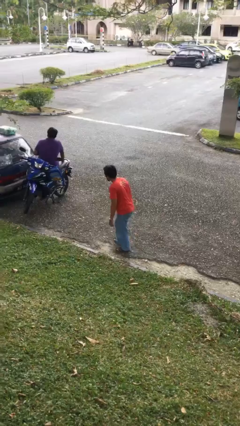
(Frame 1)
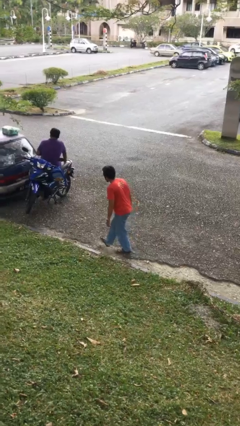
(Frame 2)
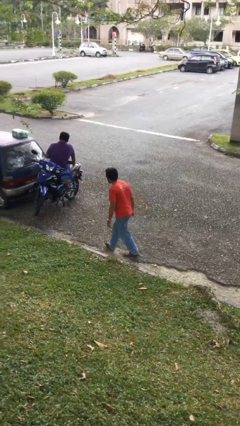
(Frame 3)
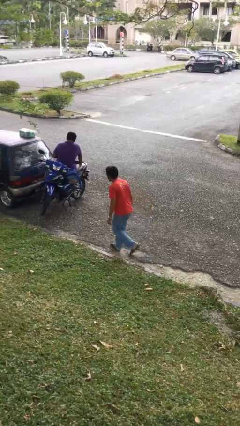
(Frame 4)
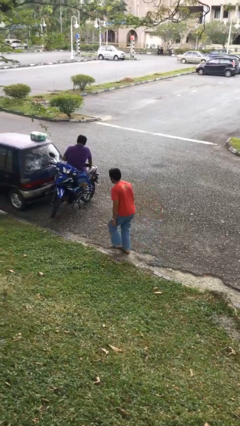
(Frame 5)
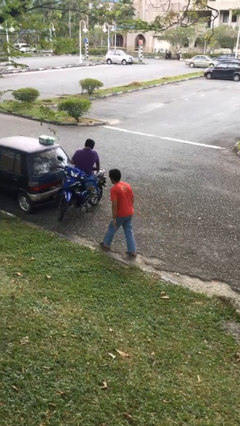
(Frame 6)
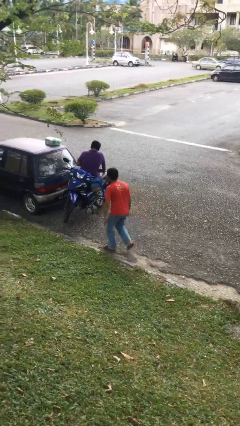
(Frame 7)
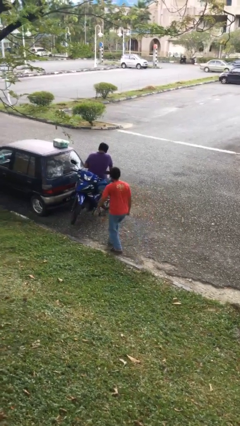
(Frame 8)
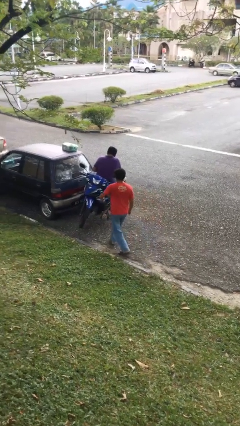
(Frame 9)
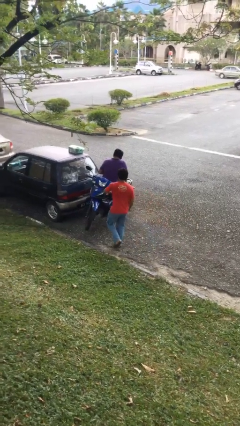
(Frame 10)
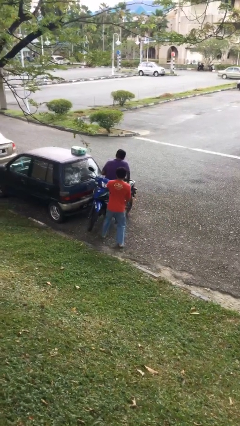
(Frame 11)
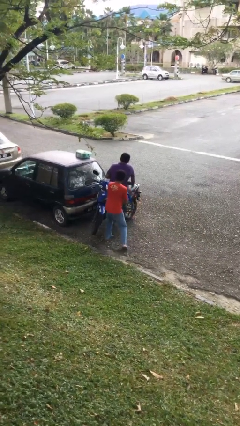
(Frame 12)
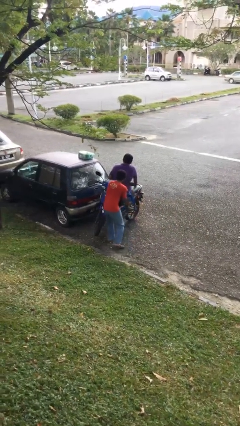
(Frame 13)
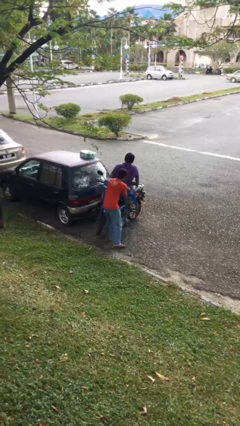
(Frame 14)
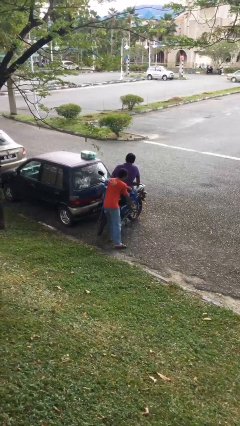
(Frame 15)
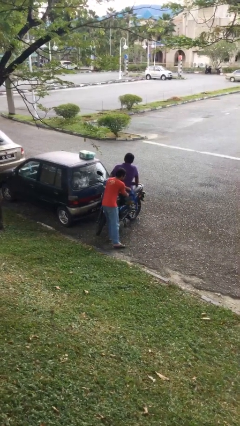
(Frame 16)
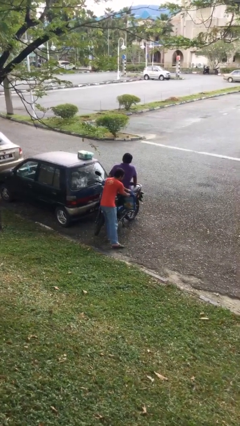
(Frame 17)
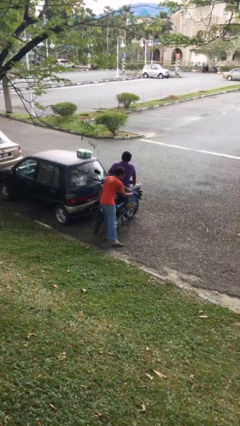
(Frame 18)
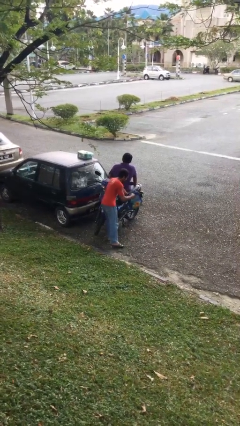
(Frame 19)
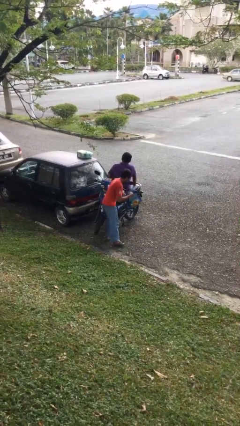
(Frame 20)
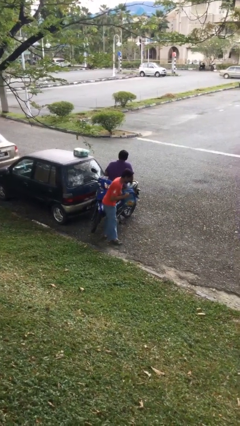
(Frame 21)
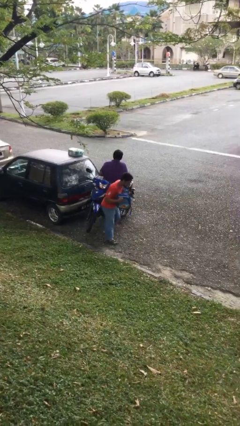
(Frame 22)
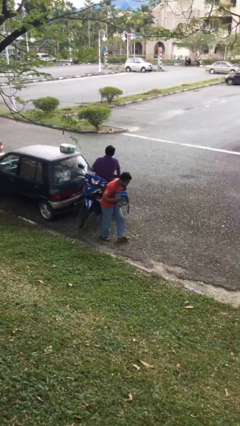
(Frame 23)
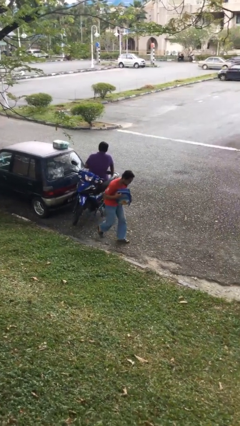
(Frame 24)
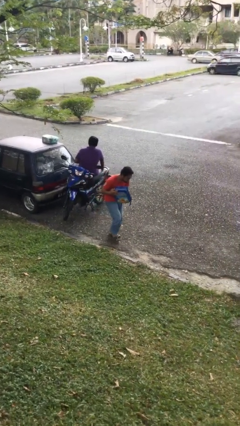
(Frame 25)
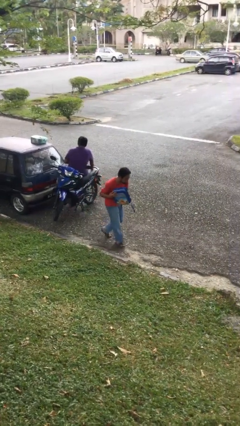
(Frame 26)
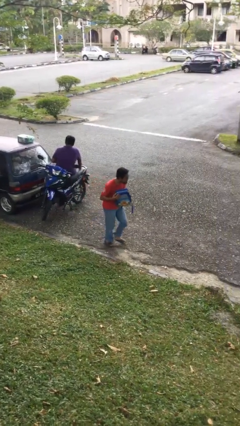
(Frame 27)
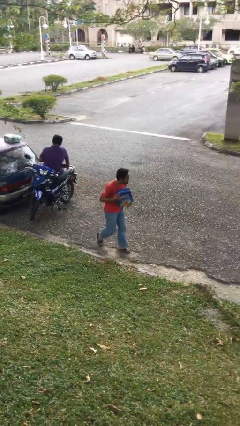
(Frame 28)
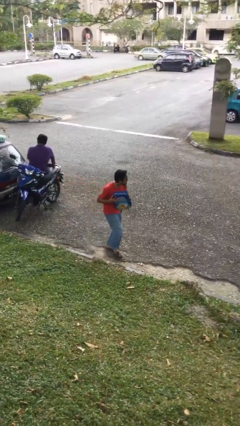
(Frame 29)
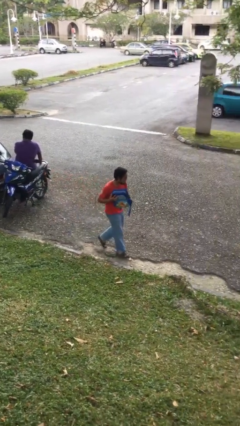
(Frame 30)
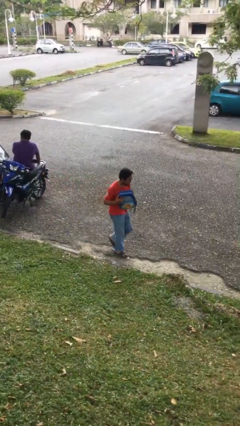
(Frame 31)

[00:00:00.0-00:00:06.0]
person steals object from person

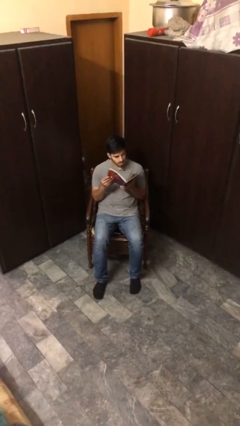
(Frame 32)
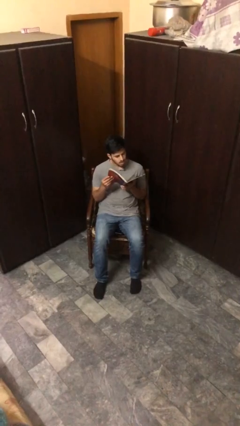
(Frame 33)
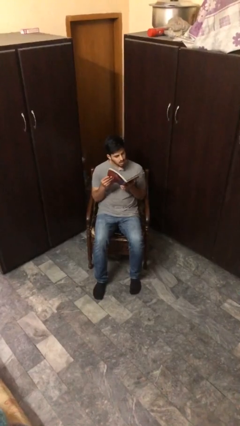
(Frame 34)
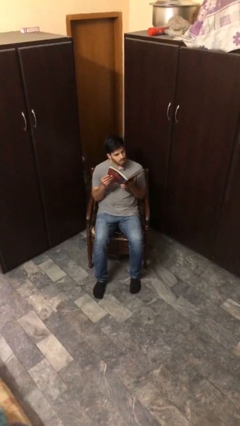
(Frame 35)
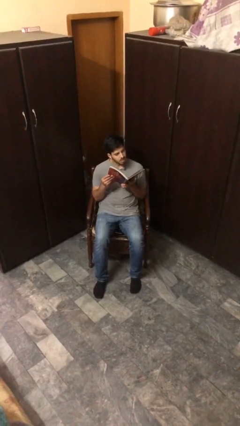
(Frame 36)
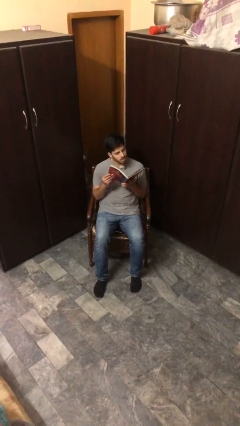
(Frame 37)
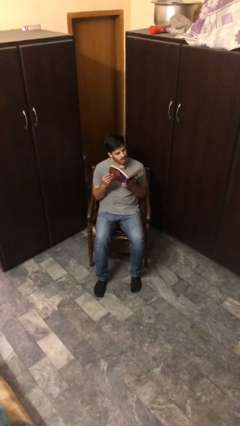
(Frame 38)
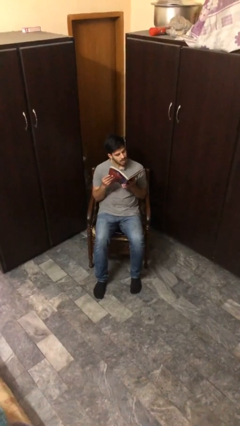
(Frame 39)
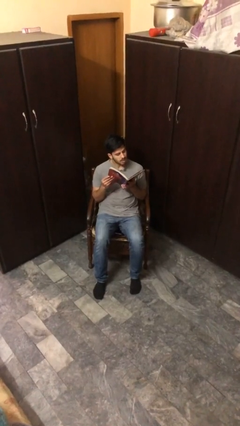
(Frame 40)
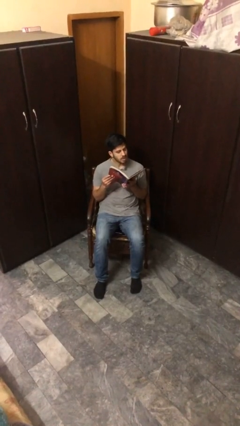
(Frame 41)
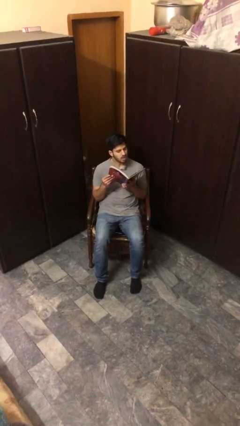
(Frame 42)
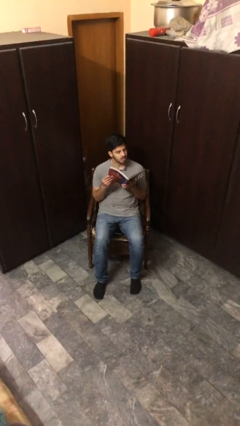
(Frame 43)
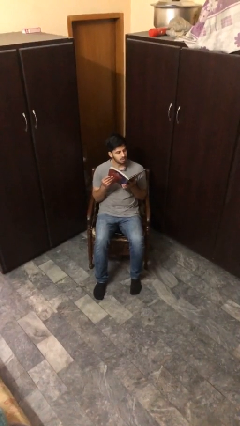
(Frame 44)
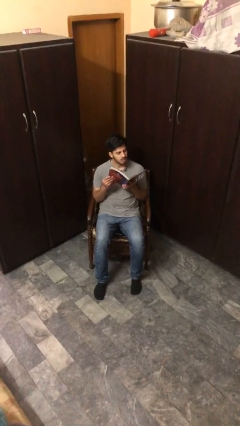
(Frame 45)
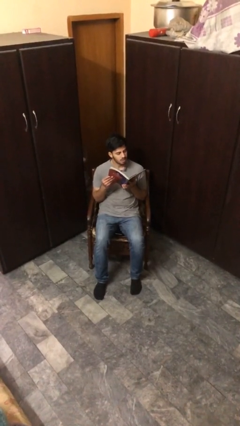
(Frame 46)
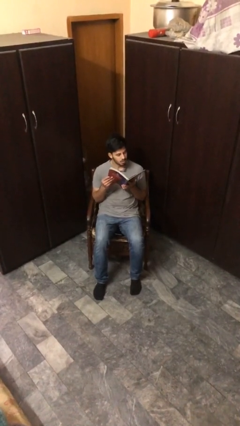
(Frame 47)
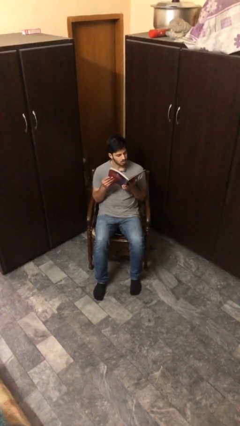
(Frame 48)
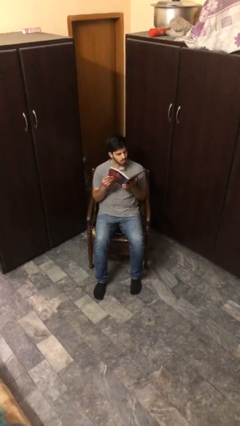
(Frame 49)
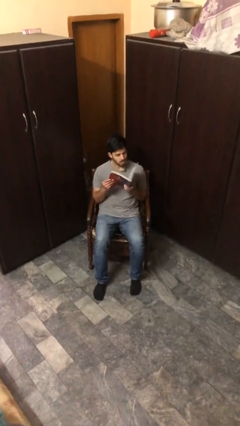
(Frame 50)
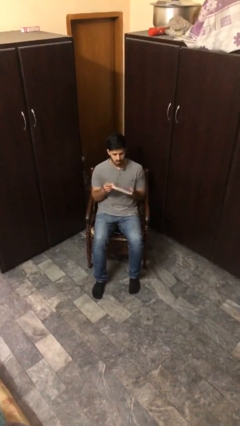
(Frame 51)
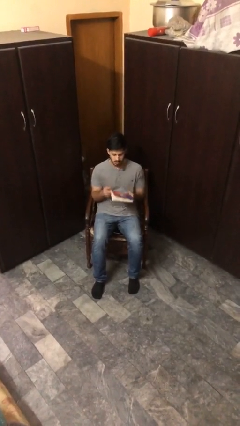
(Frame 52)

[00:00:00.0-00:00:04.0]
person reads document

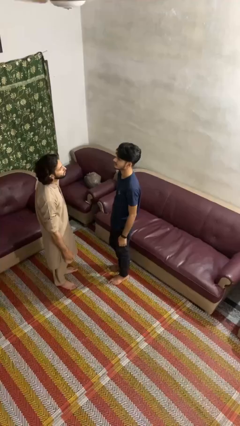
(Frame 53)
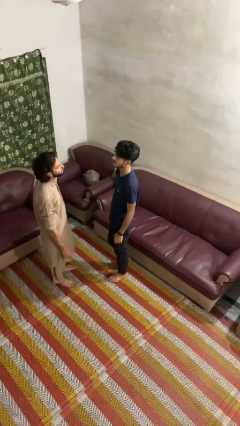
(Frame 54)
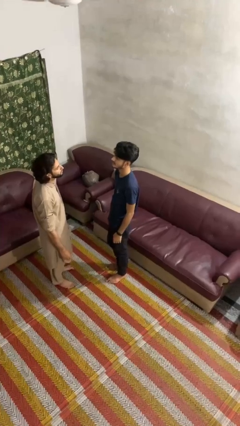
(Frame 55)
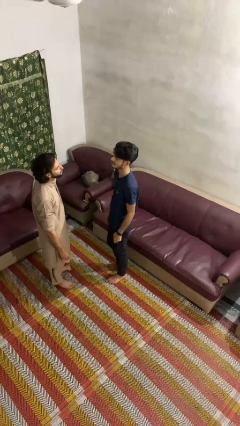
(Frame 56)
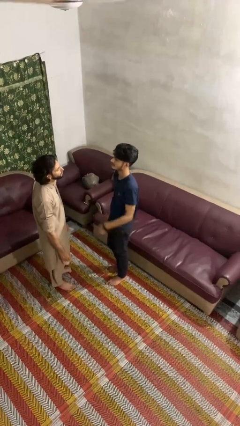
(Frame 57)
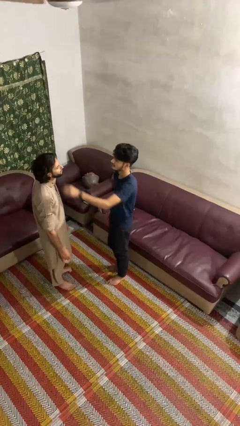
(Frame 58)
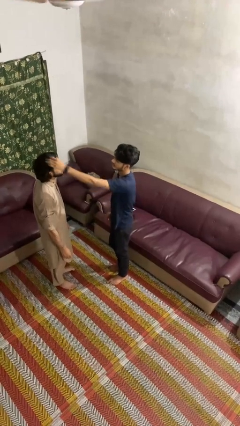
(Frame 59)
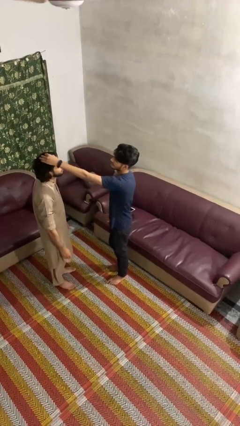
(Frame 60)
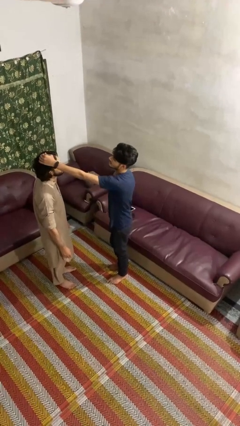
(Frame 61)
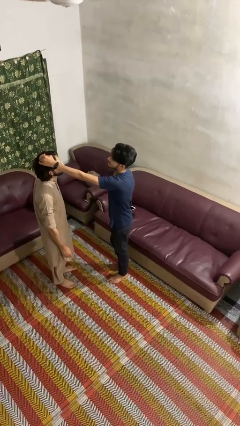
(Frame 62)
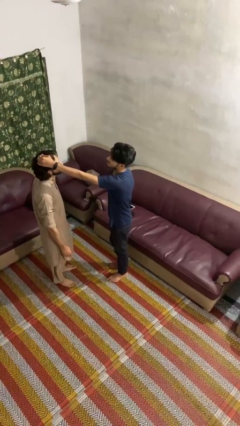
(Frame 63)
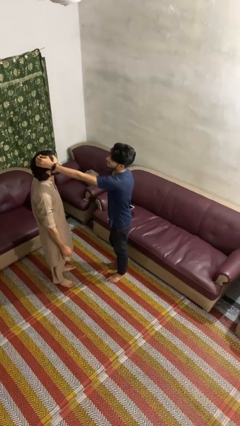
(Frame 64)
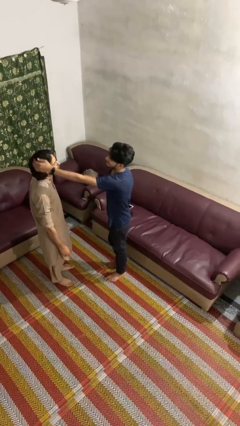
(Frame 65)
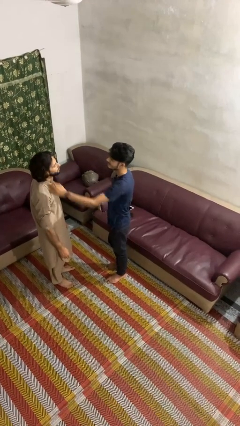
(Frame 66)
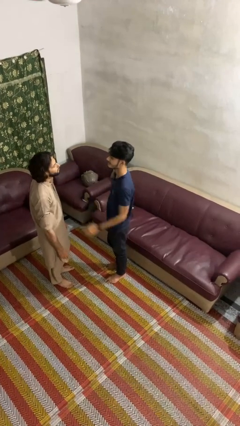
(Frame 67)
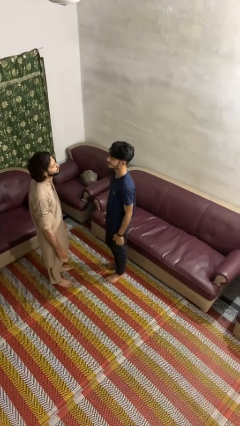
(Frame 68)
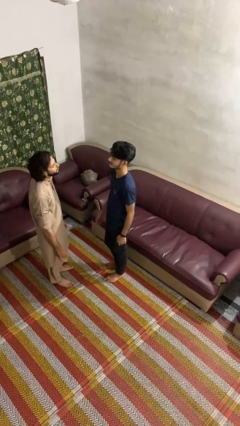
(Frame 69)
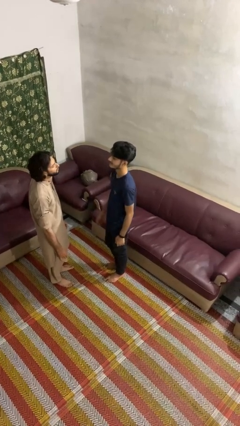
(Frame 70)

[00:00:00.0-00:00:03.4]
person grabs person by hair

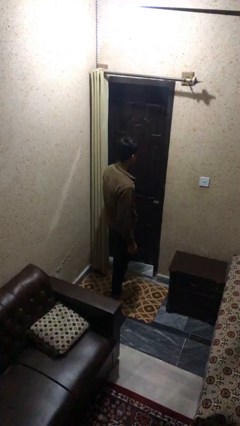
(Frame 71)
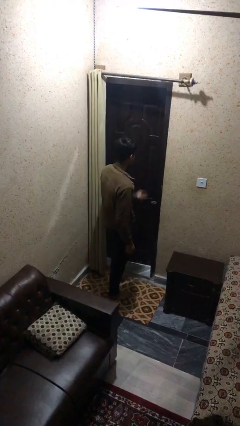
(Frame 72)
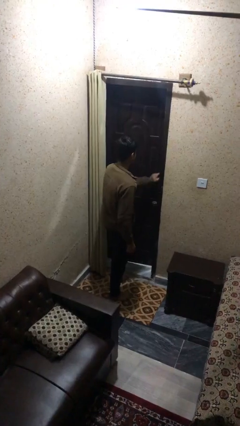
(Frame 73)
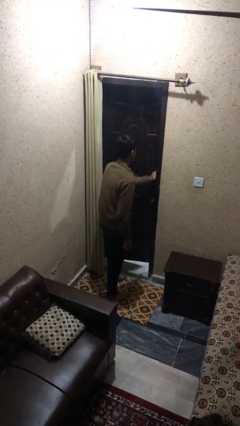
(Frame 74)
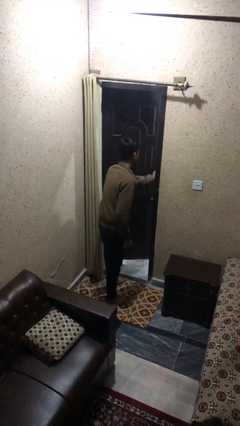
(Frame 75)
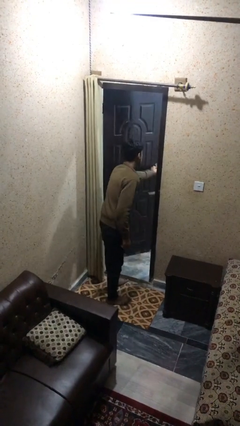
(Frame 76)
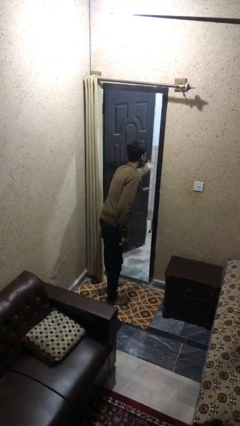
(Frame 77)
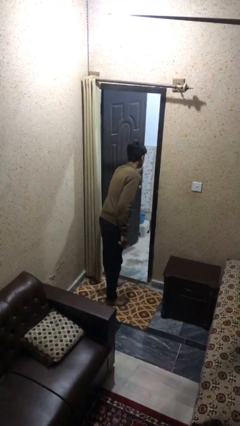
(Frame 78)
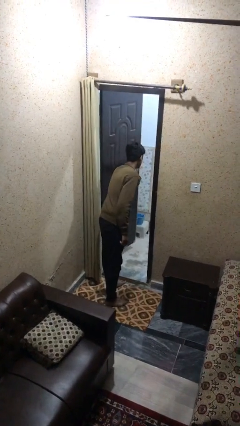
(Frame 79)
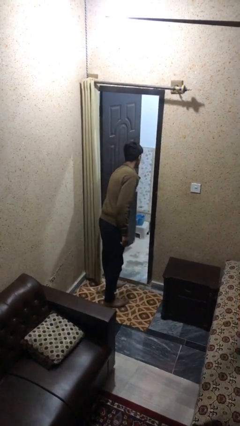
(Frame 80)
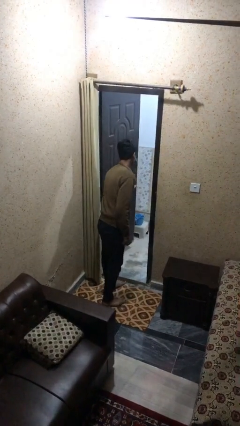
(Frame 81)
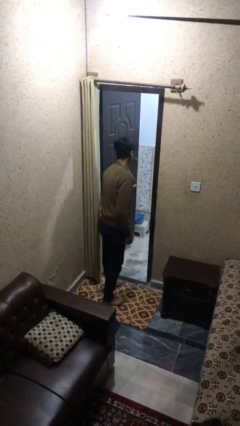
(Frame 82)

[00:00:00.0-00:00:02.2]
person opens facility door

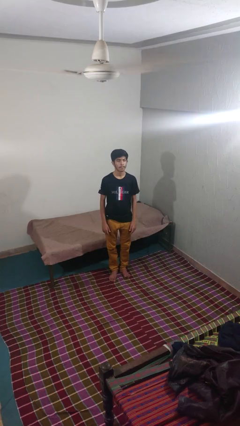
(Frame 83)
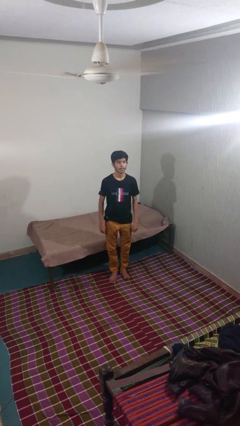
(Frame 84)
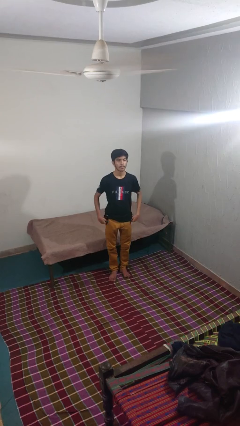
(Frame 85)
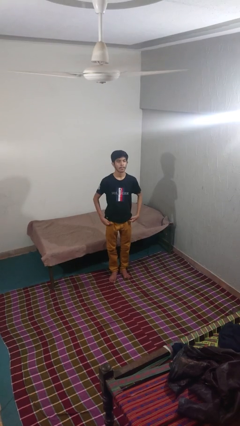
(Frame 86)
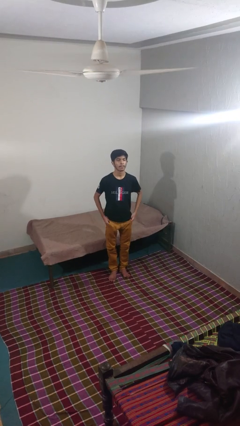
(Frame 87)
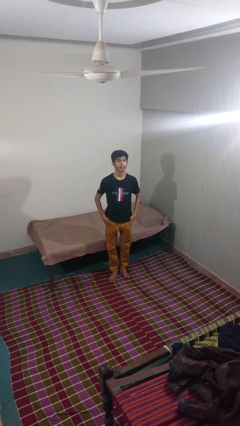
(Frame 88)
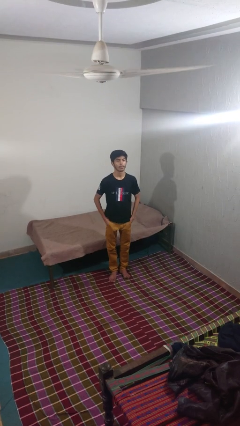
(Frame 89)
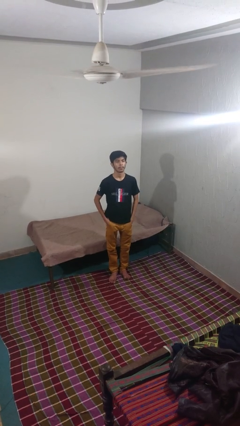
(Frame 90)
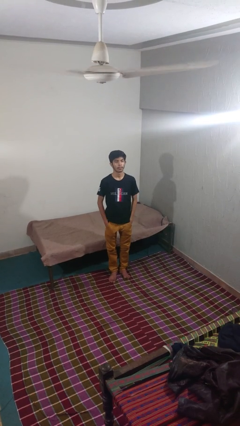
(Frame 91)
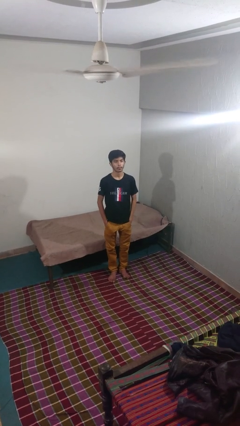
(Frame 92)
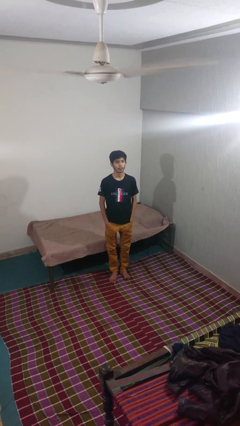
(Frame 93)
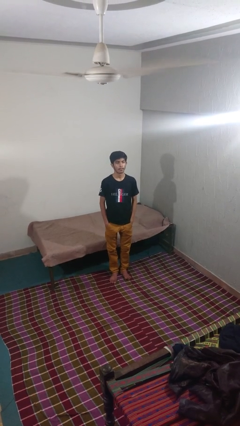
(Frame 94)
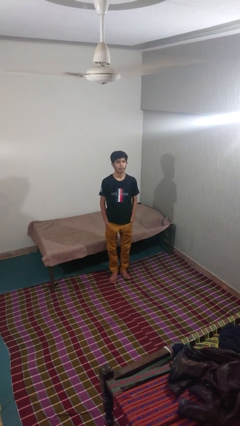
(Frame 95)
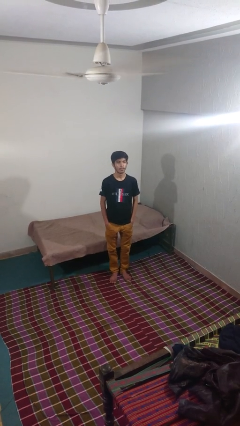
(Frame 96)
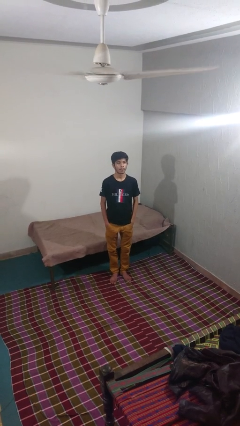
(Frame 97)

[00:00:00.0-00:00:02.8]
person puts hands in back pockets
